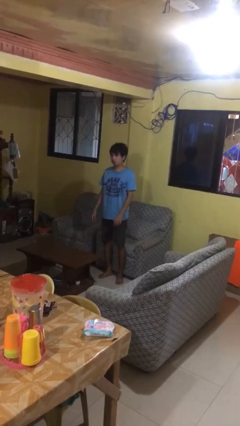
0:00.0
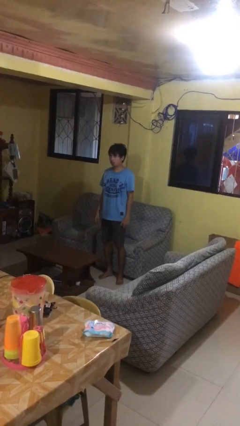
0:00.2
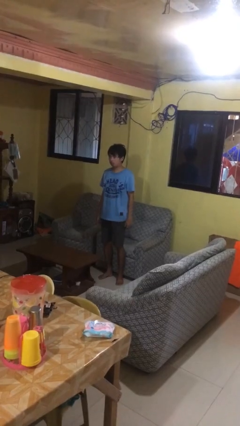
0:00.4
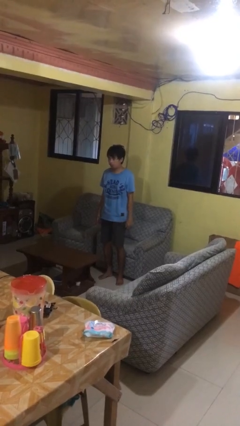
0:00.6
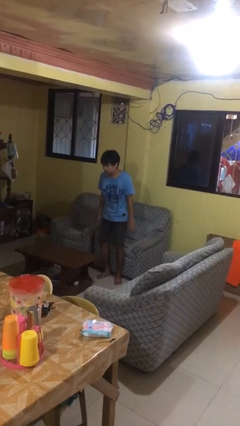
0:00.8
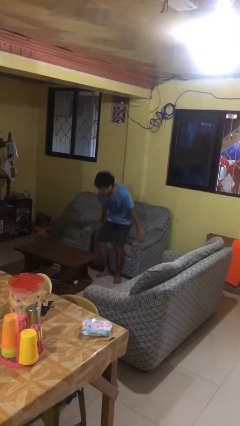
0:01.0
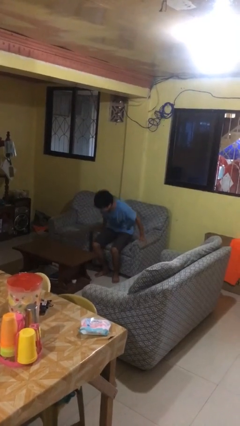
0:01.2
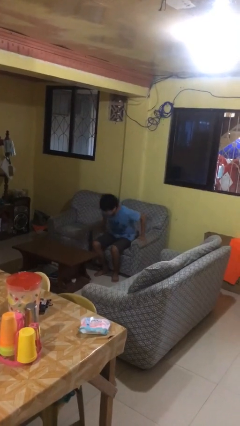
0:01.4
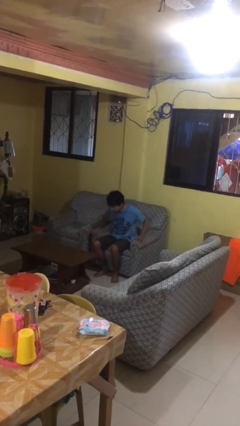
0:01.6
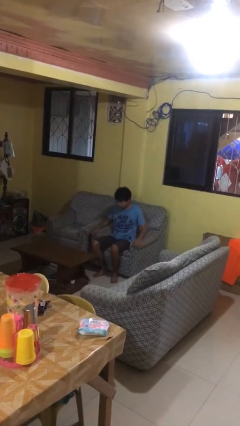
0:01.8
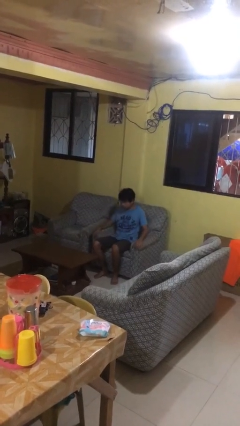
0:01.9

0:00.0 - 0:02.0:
person lies down on couch

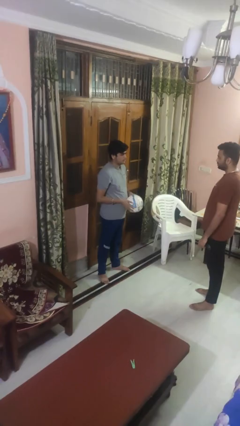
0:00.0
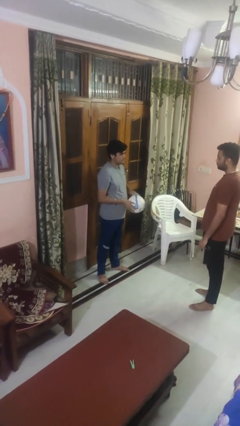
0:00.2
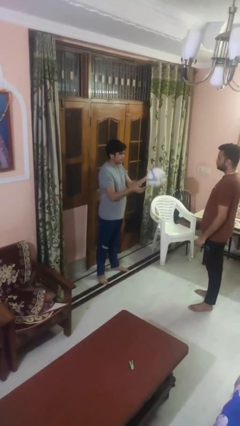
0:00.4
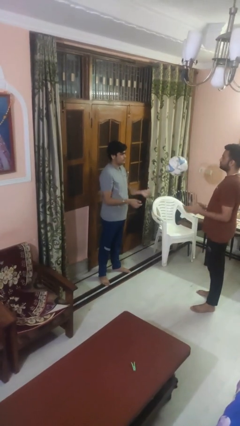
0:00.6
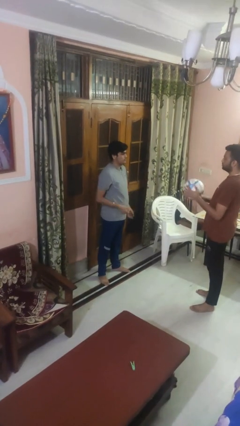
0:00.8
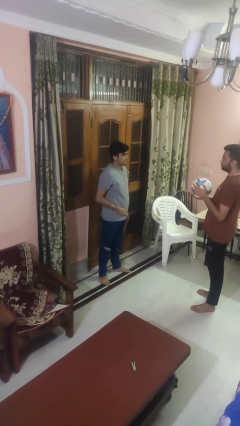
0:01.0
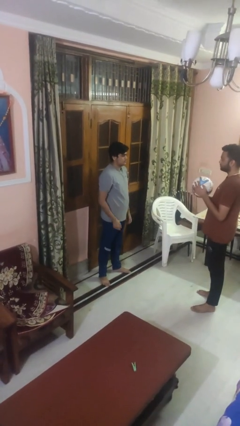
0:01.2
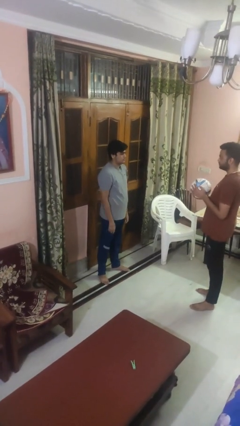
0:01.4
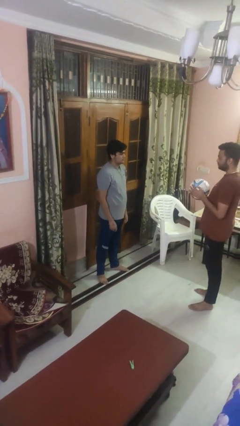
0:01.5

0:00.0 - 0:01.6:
person throws object to person

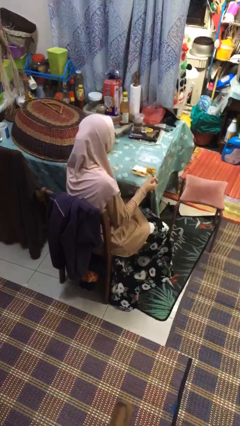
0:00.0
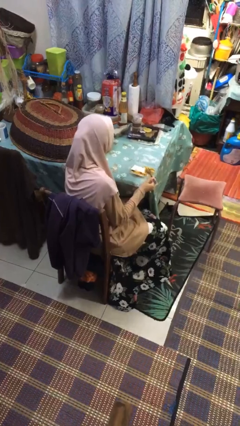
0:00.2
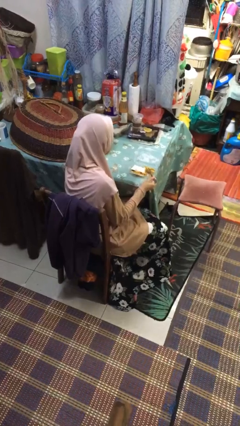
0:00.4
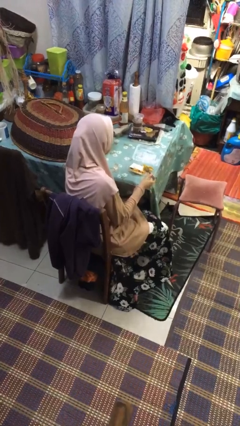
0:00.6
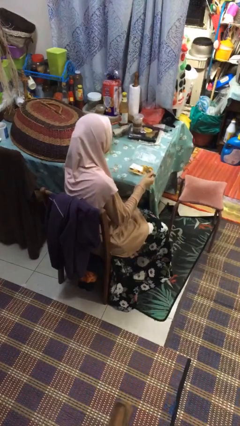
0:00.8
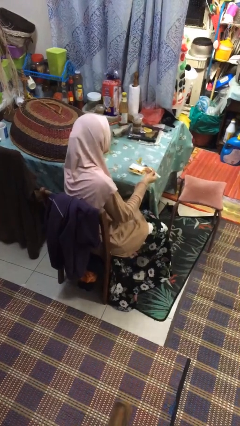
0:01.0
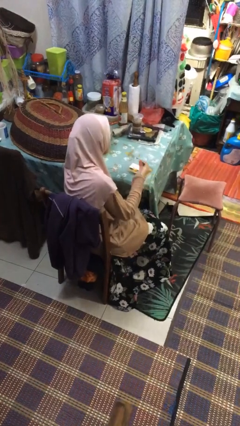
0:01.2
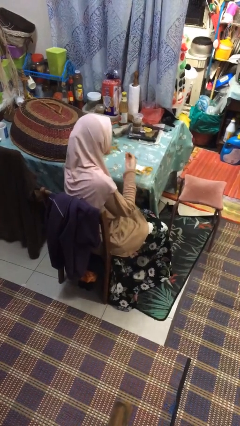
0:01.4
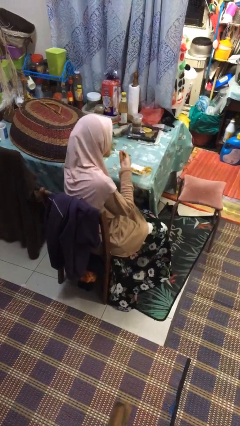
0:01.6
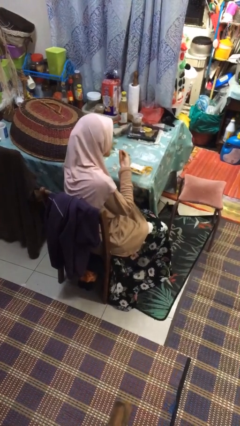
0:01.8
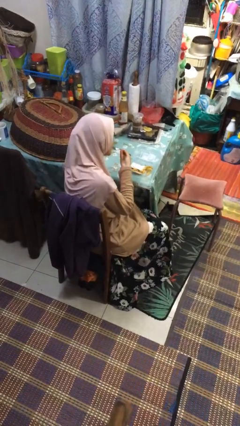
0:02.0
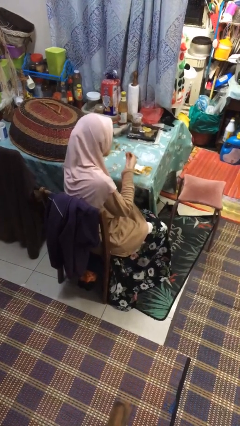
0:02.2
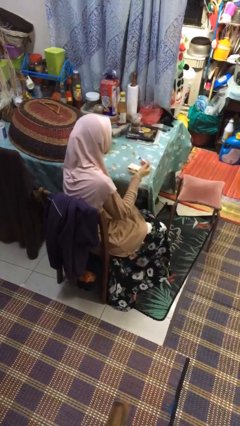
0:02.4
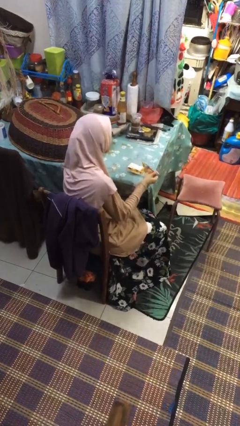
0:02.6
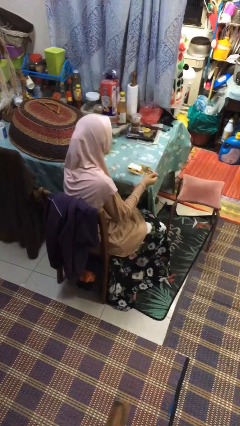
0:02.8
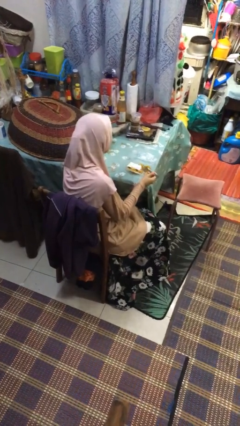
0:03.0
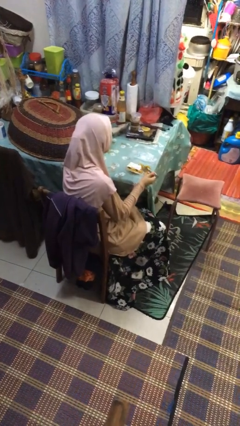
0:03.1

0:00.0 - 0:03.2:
person eats with utensil

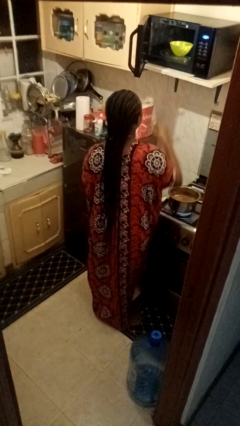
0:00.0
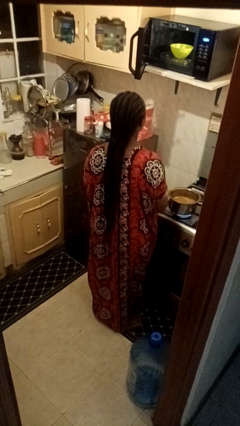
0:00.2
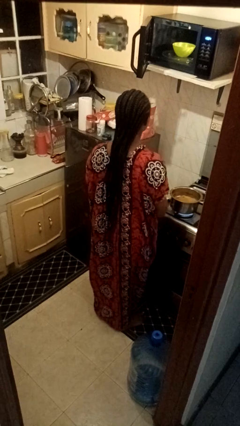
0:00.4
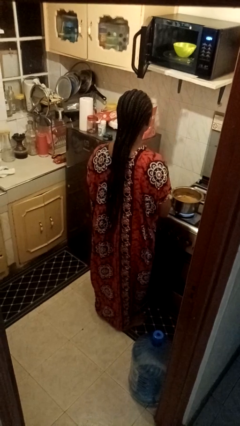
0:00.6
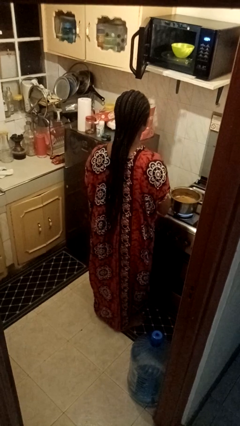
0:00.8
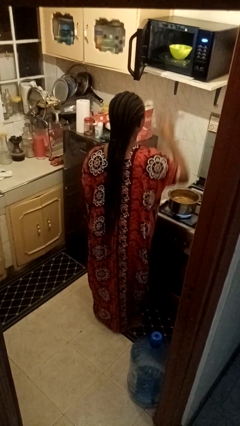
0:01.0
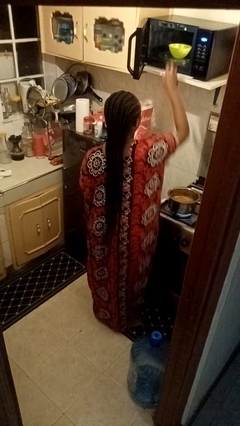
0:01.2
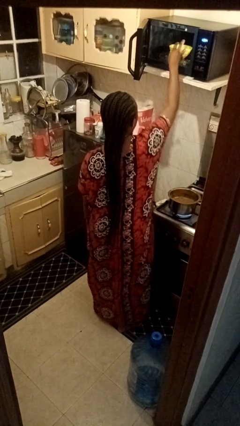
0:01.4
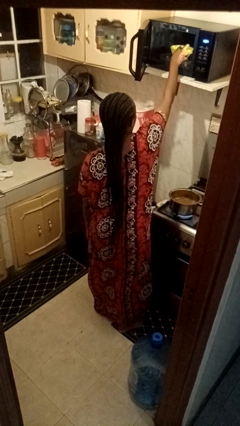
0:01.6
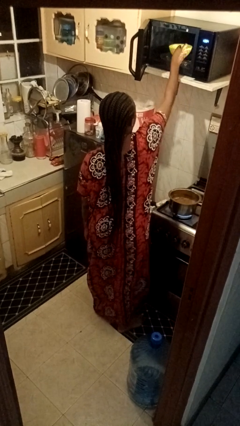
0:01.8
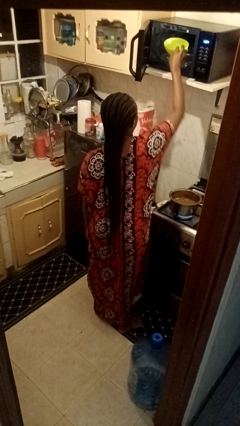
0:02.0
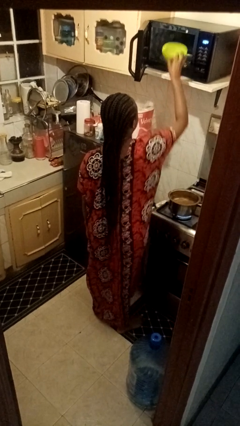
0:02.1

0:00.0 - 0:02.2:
person takes object from microwave

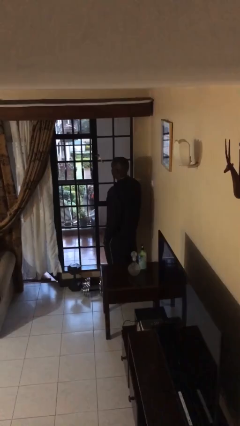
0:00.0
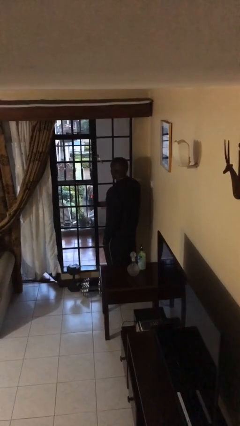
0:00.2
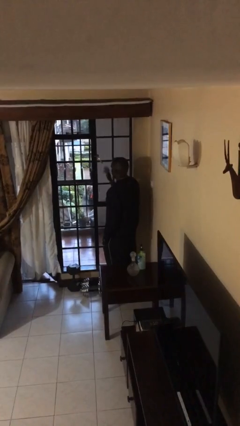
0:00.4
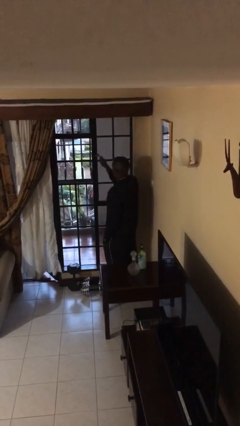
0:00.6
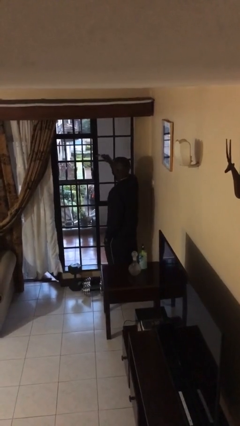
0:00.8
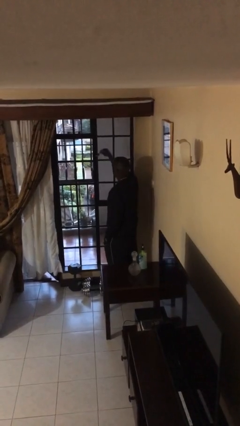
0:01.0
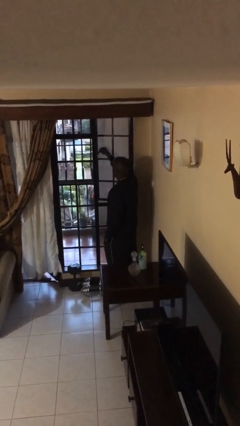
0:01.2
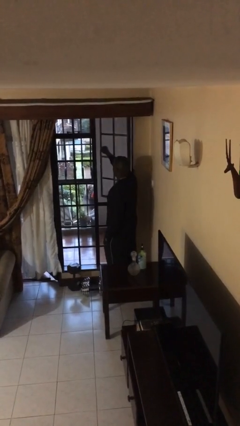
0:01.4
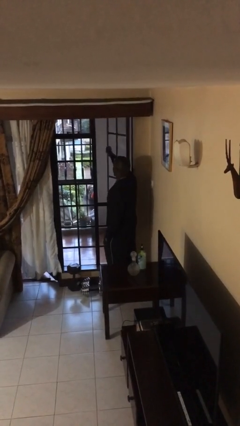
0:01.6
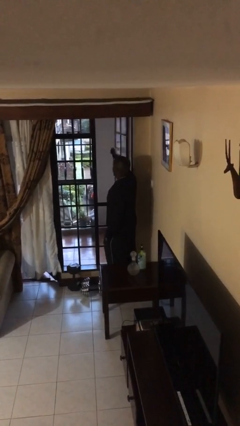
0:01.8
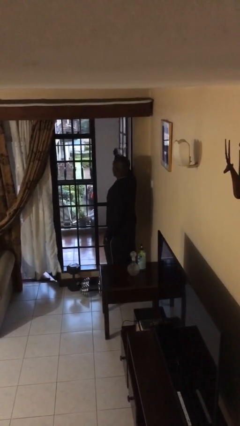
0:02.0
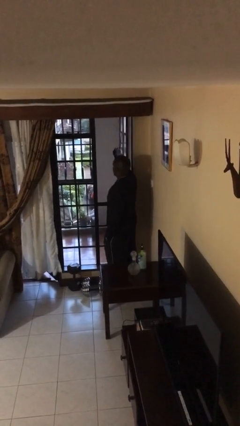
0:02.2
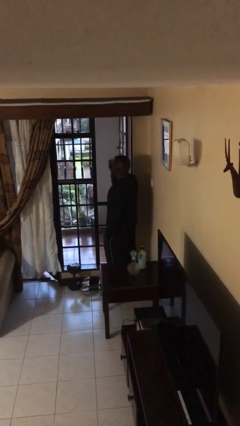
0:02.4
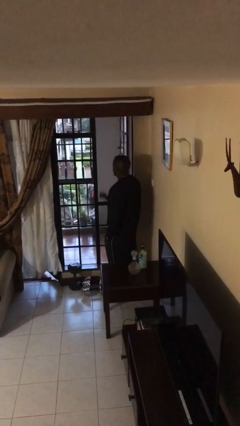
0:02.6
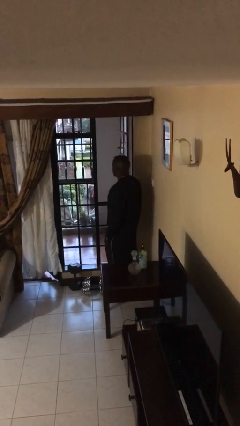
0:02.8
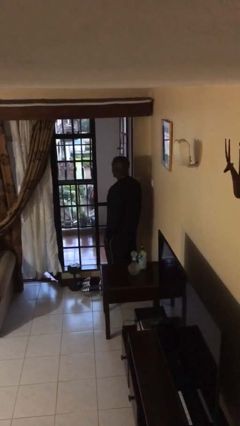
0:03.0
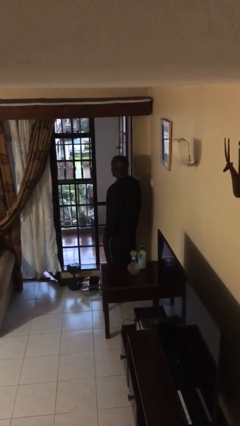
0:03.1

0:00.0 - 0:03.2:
person opens home window

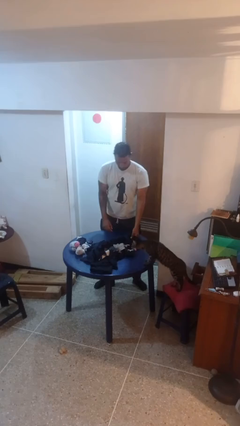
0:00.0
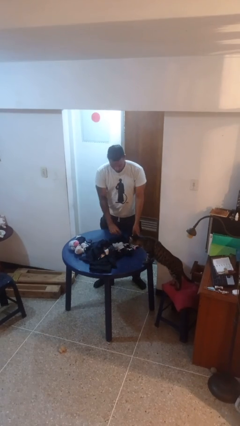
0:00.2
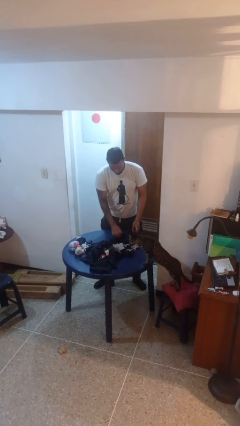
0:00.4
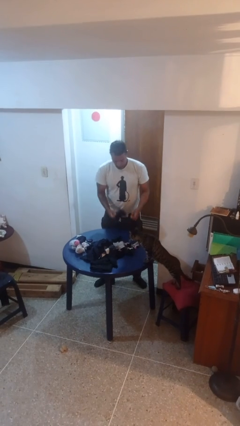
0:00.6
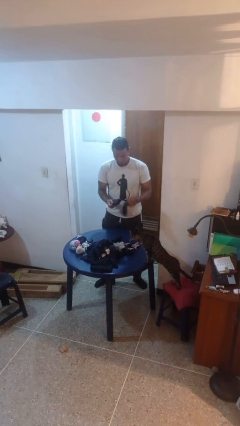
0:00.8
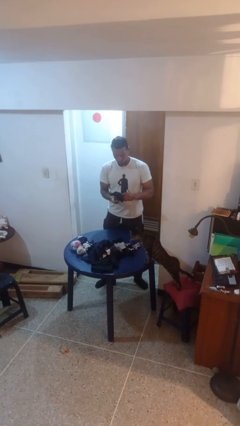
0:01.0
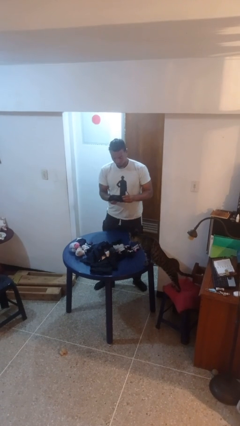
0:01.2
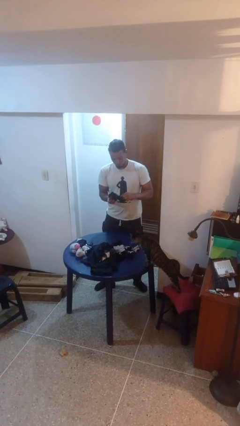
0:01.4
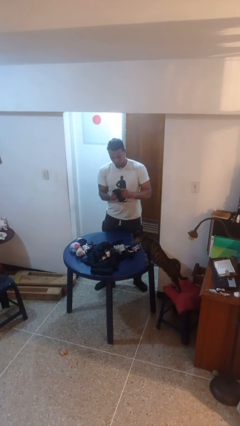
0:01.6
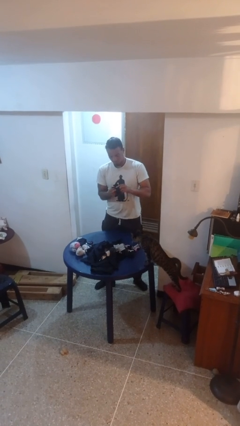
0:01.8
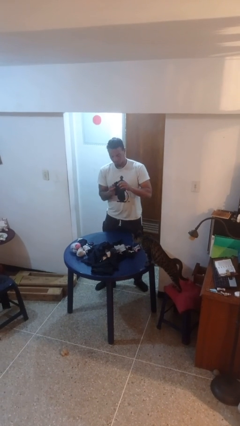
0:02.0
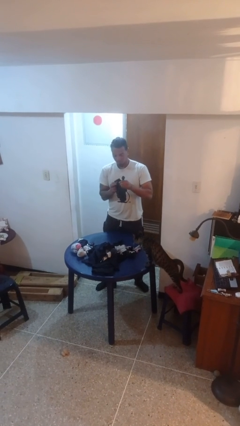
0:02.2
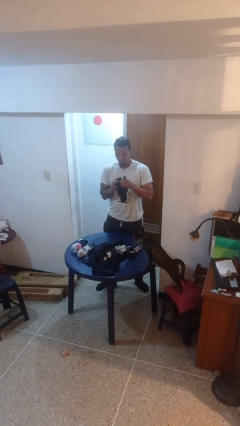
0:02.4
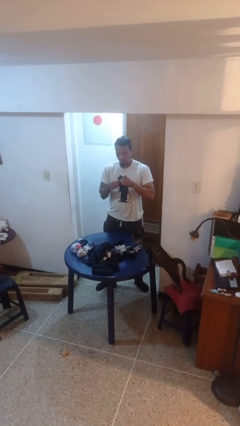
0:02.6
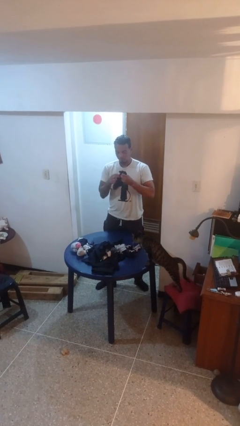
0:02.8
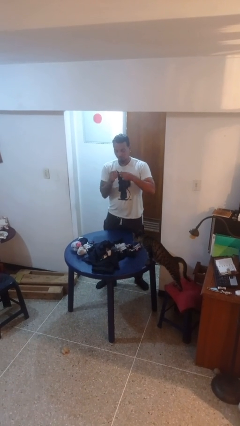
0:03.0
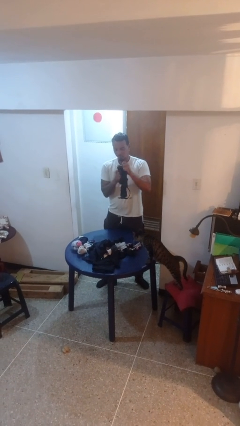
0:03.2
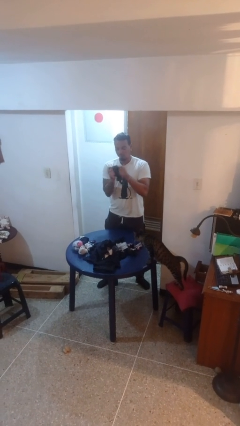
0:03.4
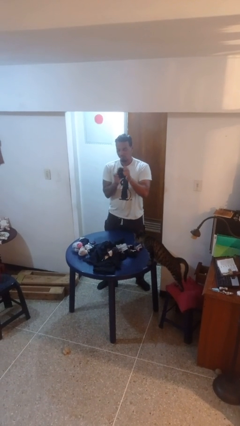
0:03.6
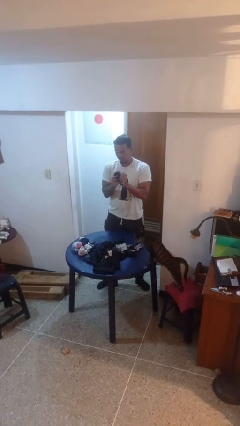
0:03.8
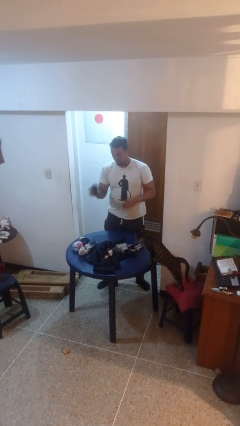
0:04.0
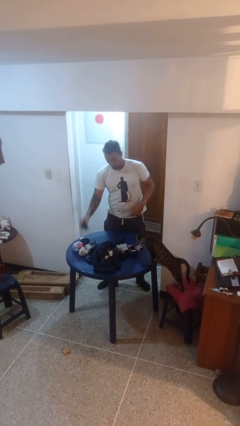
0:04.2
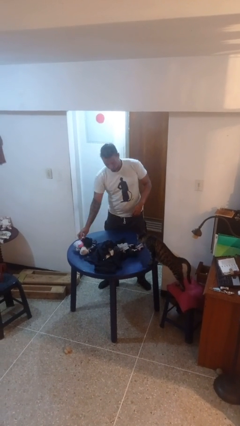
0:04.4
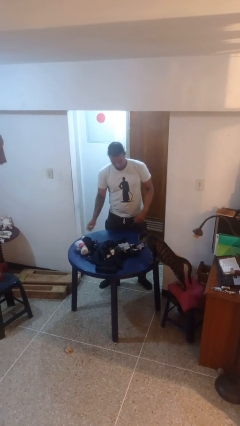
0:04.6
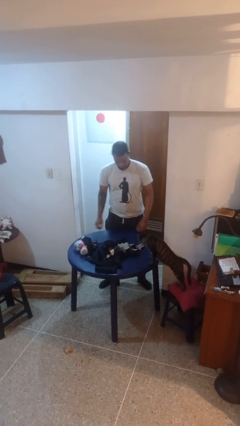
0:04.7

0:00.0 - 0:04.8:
person folds socks

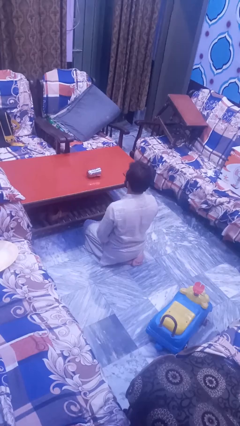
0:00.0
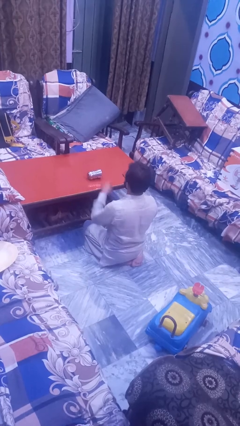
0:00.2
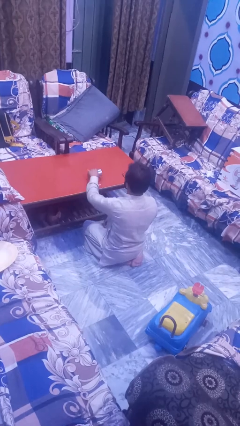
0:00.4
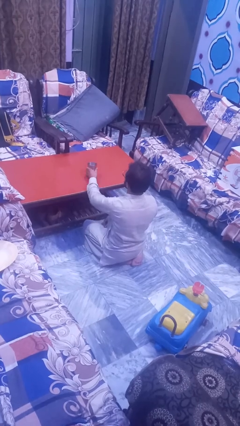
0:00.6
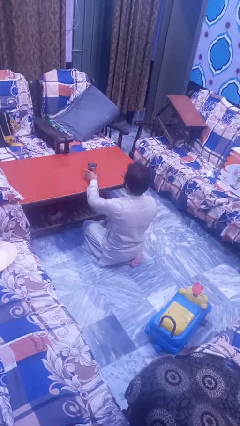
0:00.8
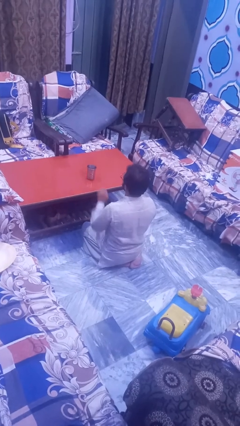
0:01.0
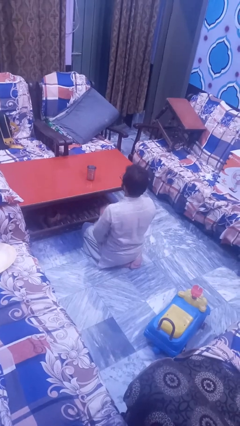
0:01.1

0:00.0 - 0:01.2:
person sets upright glass
